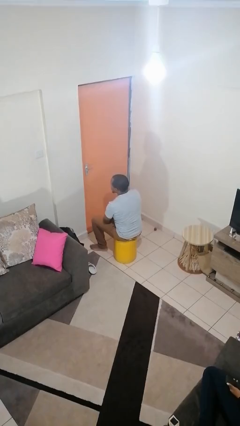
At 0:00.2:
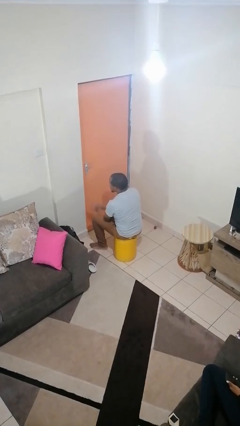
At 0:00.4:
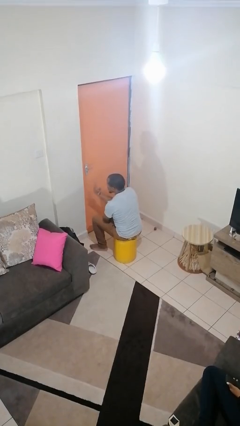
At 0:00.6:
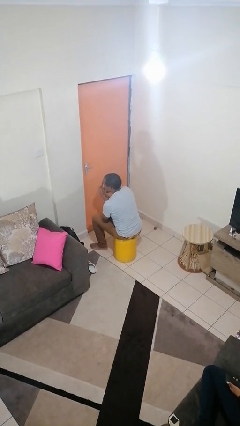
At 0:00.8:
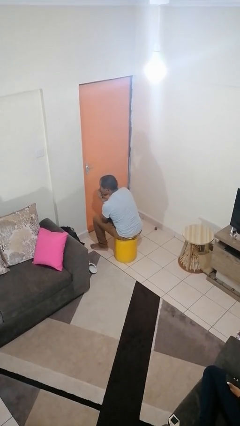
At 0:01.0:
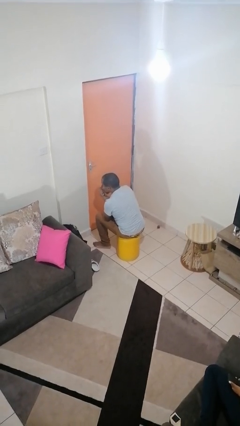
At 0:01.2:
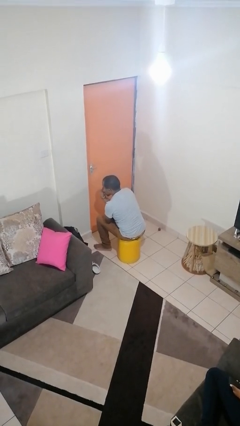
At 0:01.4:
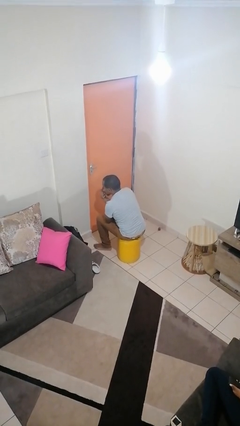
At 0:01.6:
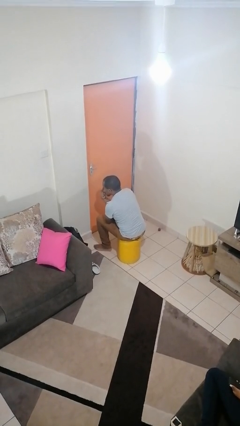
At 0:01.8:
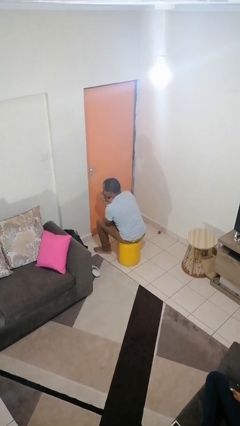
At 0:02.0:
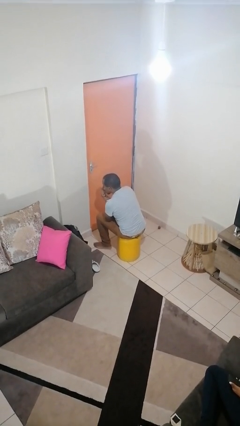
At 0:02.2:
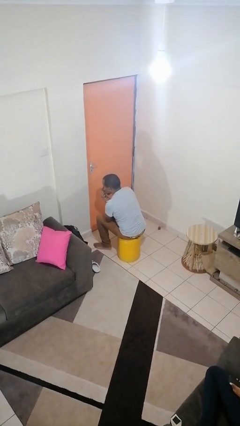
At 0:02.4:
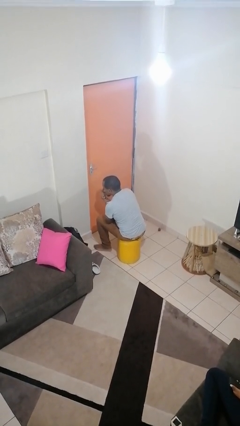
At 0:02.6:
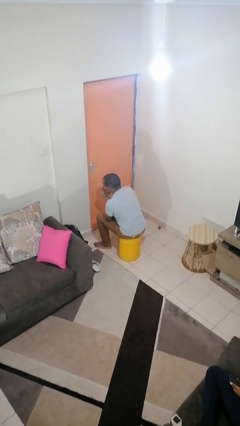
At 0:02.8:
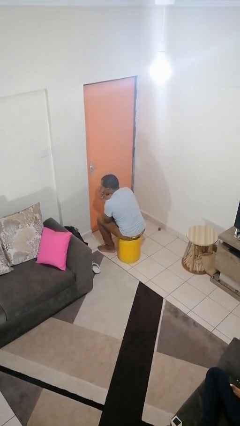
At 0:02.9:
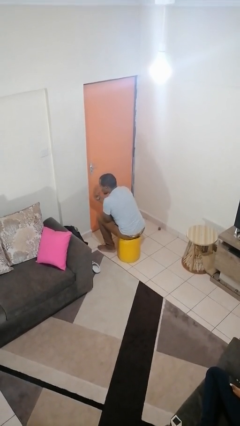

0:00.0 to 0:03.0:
person gestures watch closely

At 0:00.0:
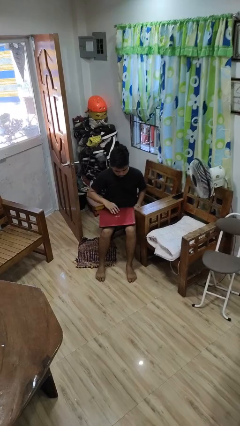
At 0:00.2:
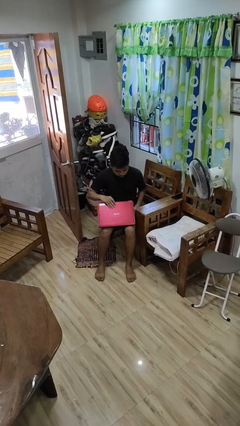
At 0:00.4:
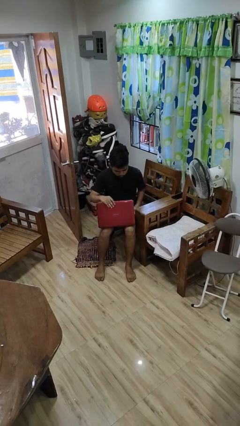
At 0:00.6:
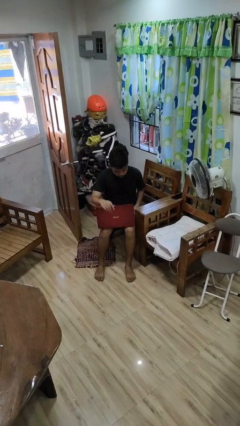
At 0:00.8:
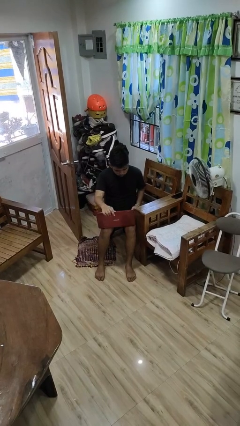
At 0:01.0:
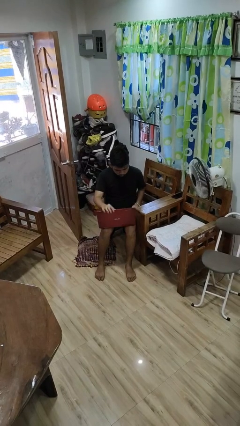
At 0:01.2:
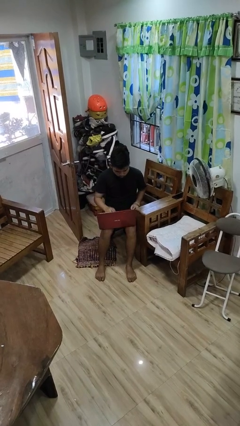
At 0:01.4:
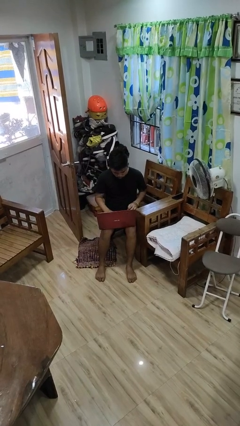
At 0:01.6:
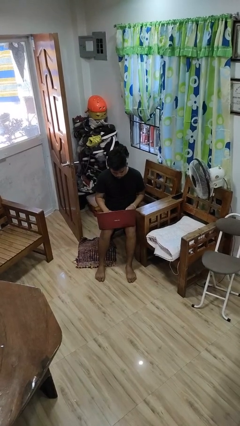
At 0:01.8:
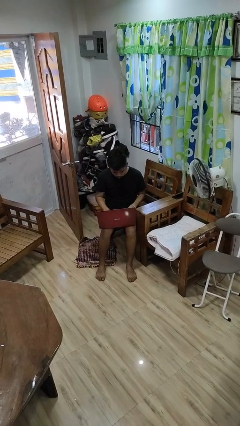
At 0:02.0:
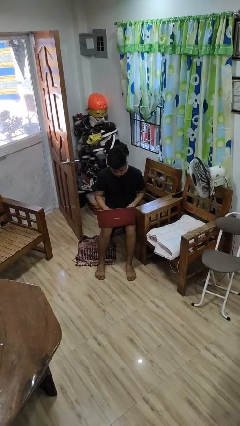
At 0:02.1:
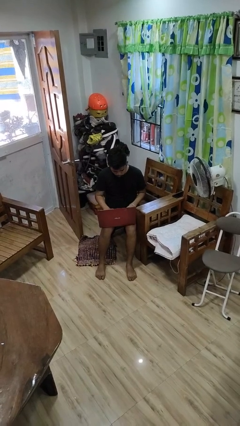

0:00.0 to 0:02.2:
person opens laptop

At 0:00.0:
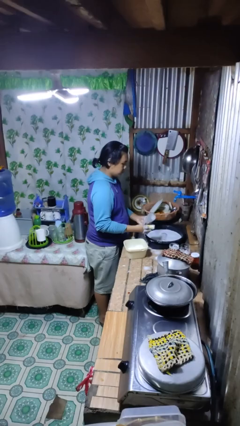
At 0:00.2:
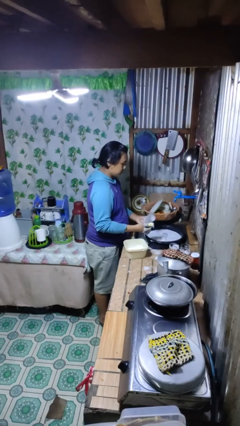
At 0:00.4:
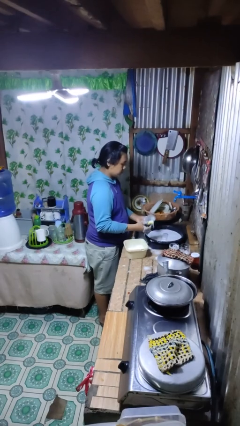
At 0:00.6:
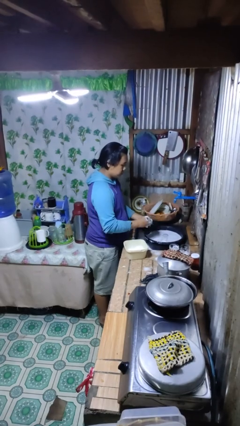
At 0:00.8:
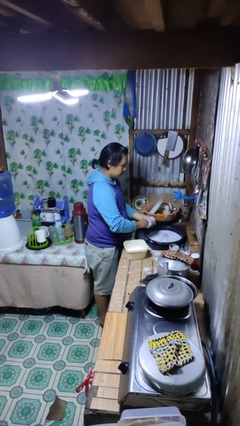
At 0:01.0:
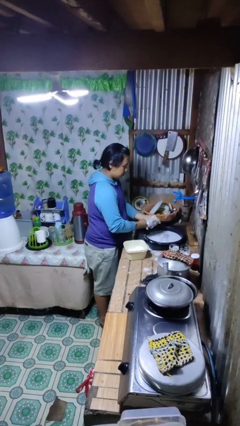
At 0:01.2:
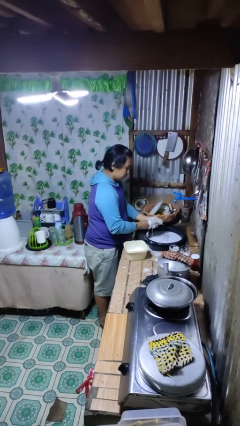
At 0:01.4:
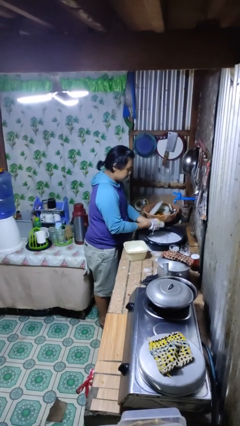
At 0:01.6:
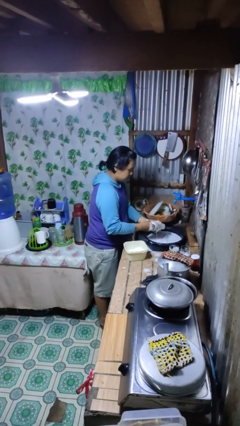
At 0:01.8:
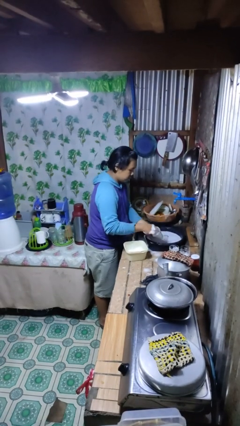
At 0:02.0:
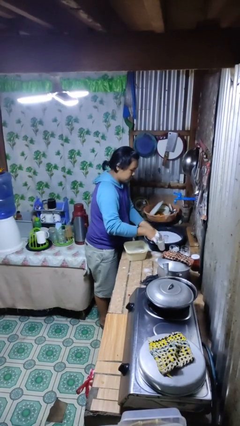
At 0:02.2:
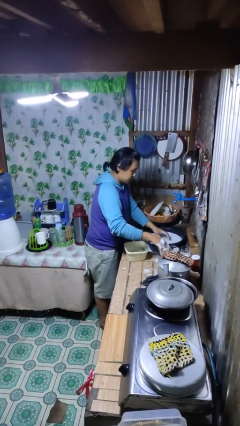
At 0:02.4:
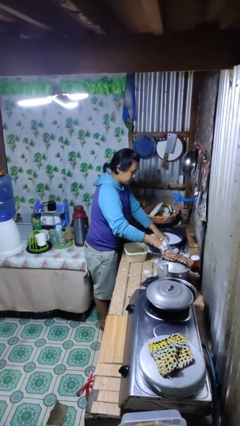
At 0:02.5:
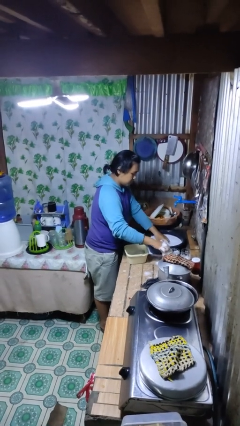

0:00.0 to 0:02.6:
person washes dish

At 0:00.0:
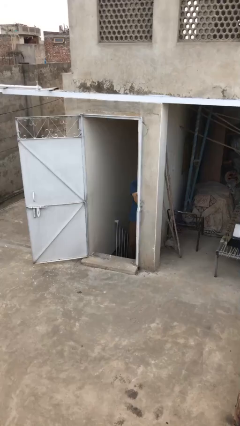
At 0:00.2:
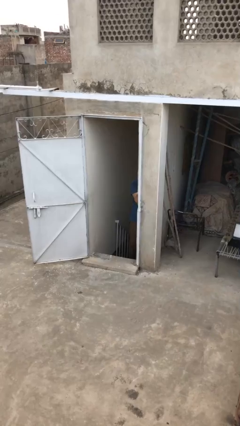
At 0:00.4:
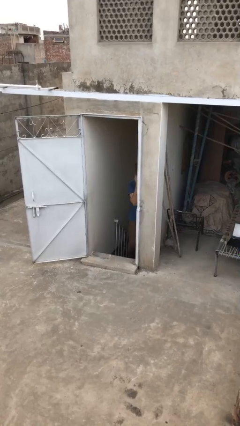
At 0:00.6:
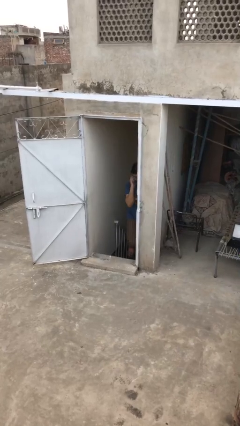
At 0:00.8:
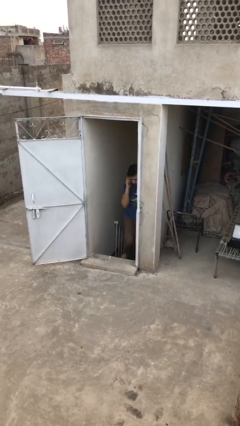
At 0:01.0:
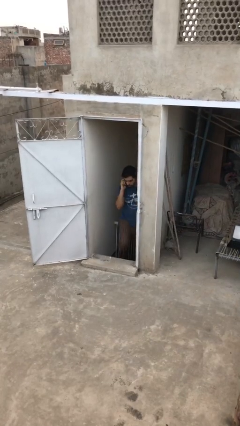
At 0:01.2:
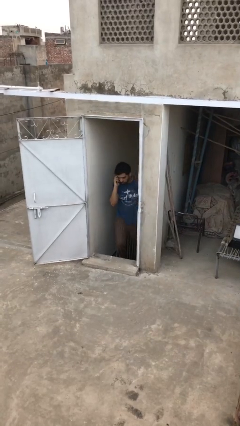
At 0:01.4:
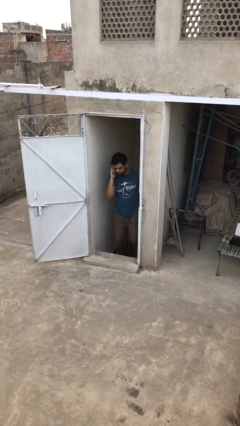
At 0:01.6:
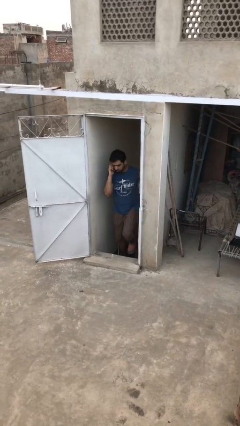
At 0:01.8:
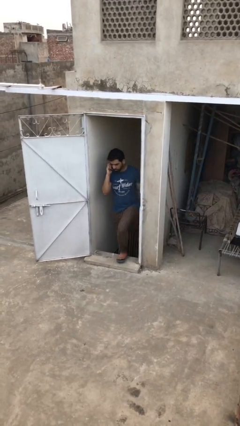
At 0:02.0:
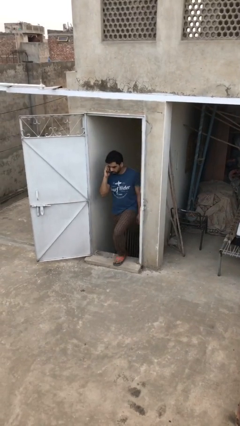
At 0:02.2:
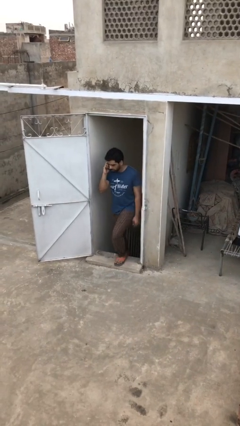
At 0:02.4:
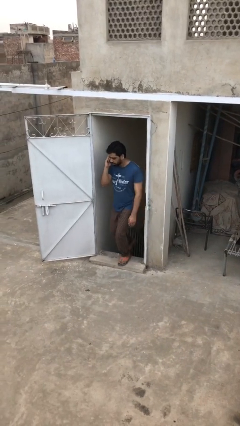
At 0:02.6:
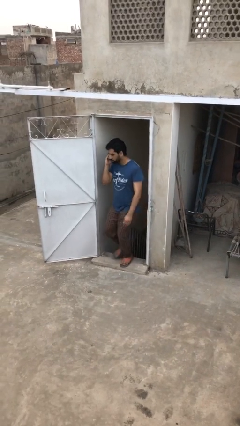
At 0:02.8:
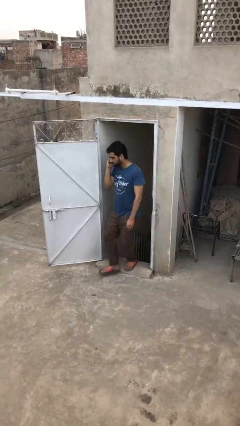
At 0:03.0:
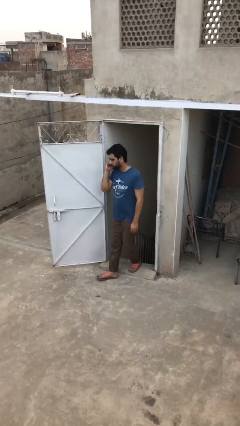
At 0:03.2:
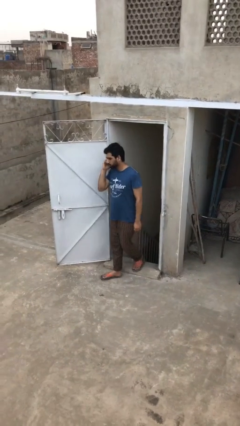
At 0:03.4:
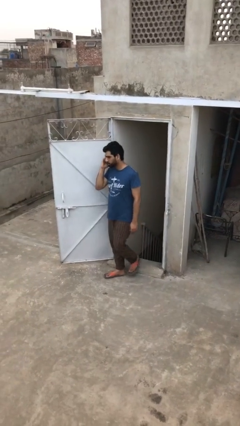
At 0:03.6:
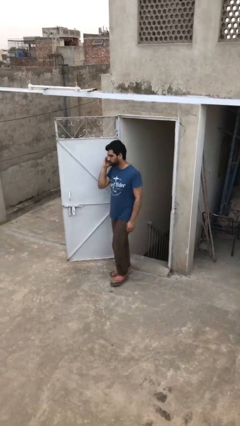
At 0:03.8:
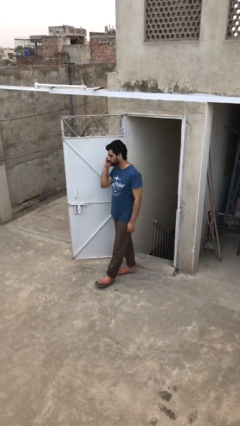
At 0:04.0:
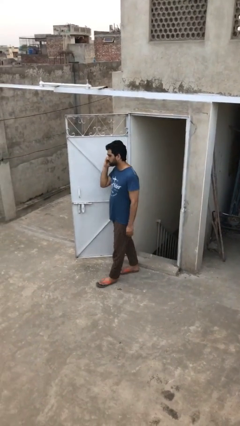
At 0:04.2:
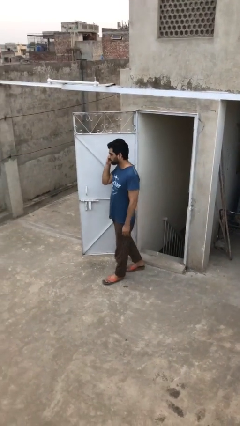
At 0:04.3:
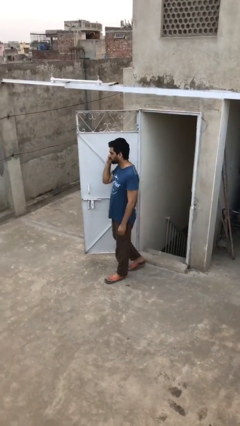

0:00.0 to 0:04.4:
person enters scene through structure

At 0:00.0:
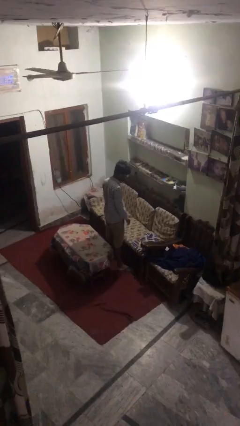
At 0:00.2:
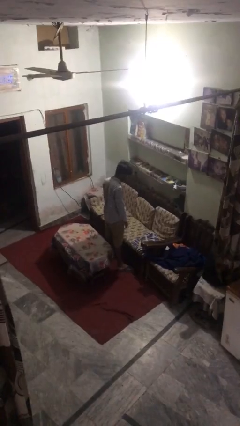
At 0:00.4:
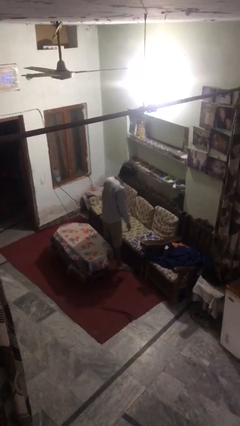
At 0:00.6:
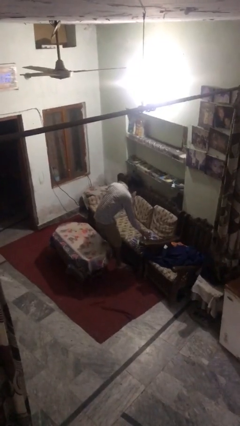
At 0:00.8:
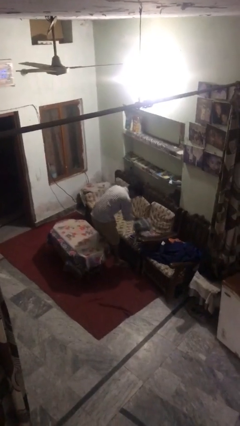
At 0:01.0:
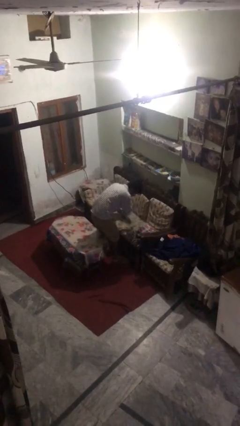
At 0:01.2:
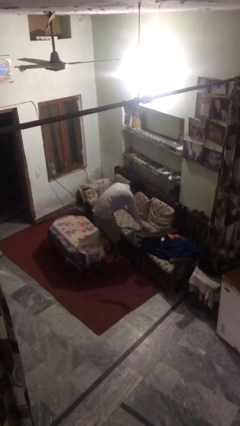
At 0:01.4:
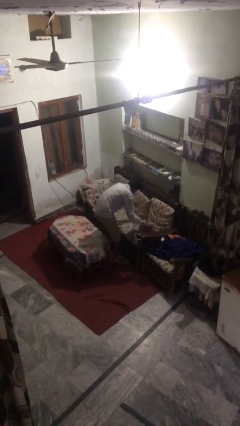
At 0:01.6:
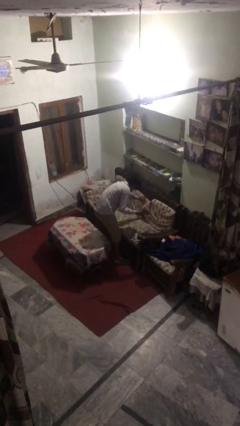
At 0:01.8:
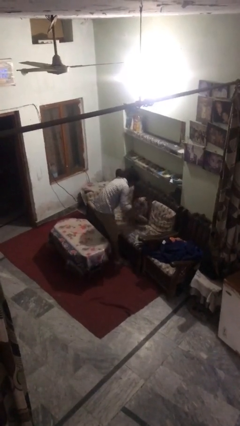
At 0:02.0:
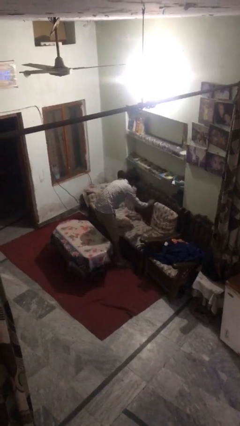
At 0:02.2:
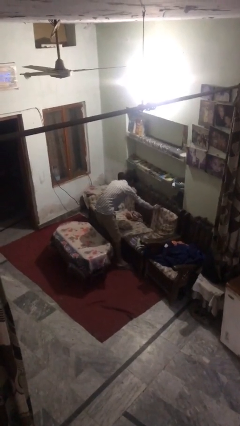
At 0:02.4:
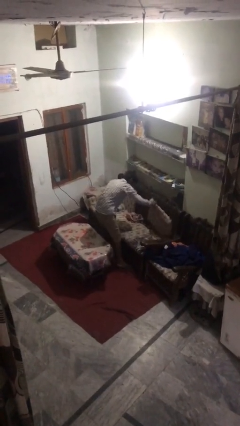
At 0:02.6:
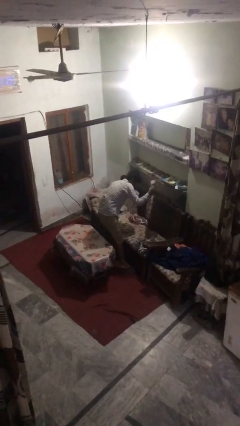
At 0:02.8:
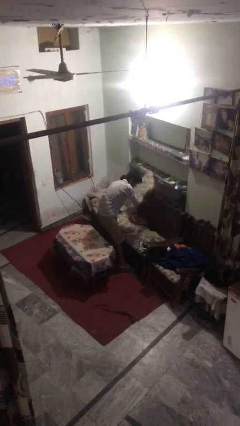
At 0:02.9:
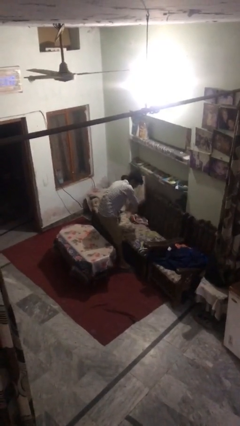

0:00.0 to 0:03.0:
person searches in couch

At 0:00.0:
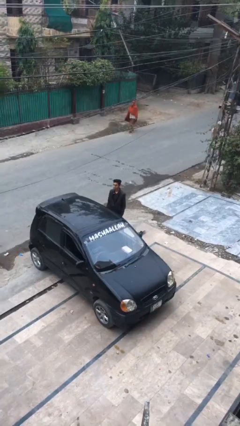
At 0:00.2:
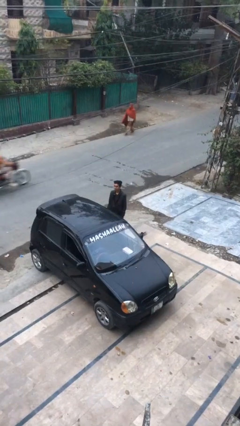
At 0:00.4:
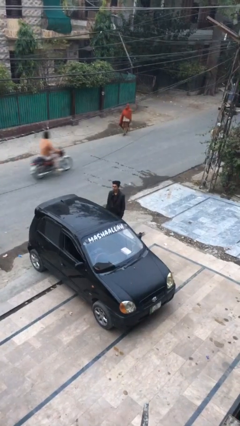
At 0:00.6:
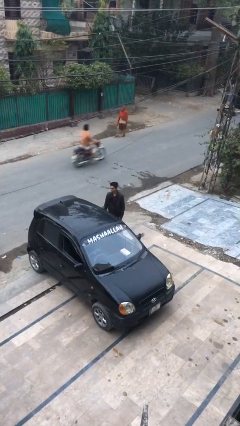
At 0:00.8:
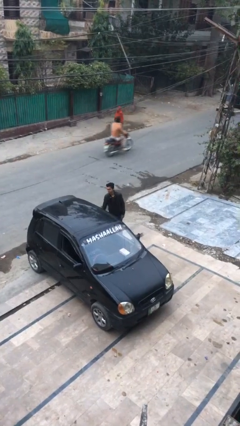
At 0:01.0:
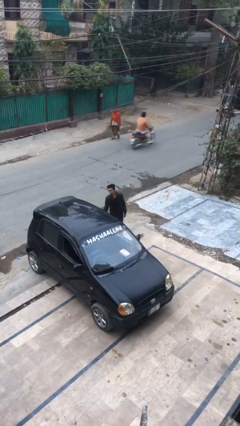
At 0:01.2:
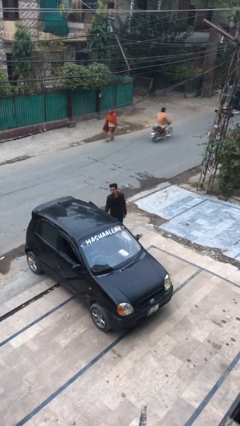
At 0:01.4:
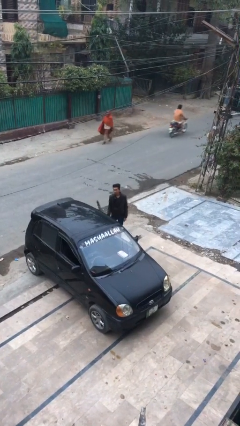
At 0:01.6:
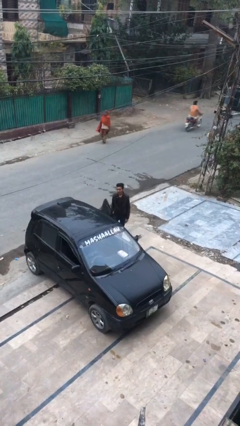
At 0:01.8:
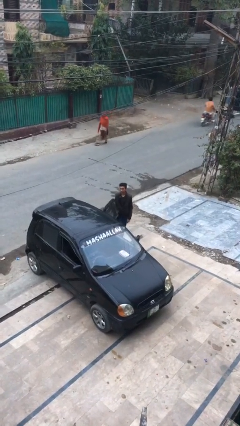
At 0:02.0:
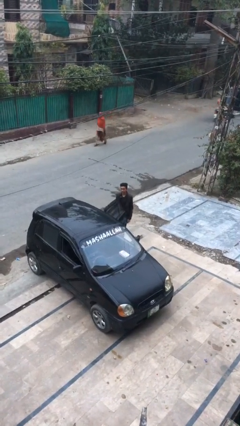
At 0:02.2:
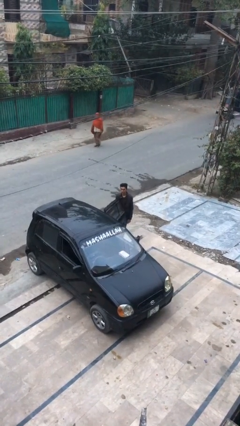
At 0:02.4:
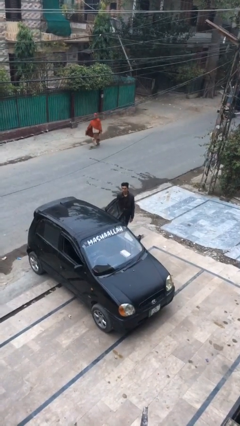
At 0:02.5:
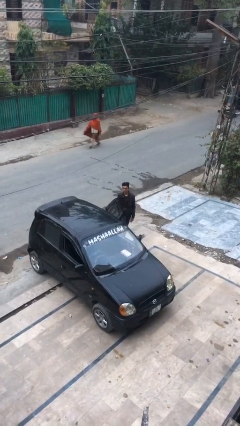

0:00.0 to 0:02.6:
person opens car door
